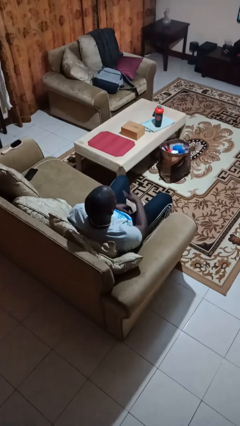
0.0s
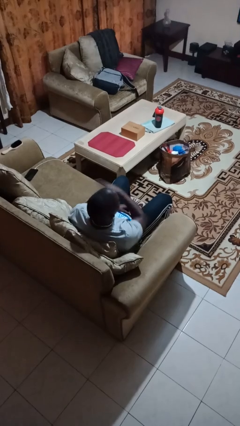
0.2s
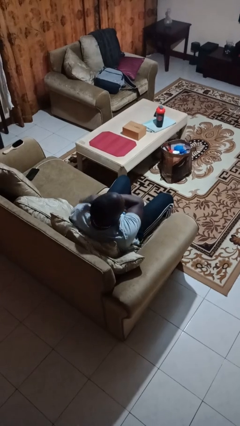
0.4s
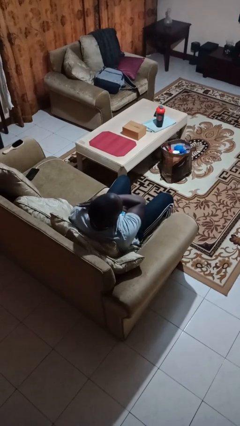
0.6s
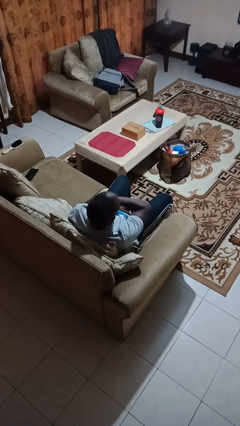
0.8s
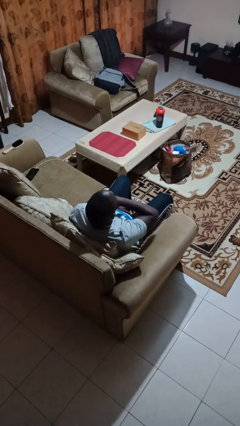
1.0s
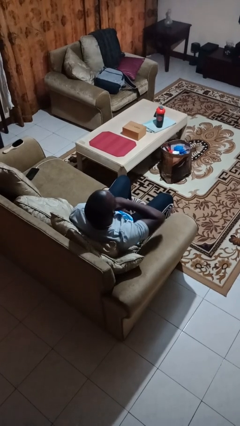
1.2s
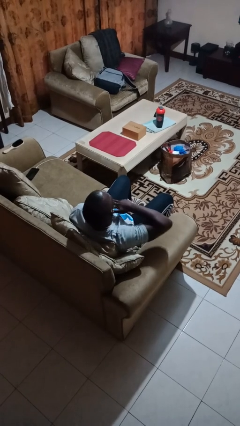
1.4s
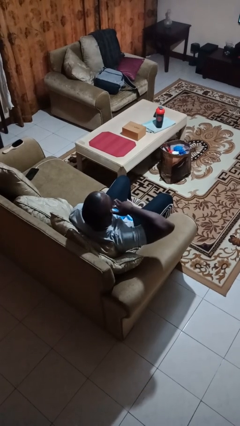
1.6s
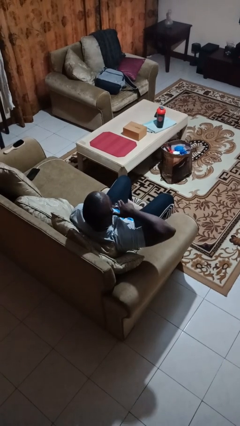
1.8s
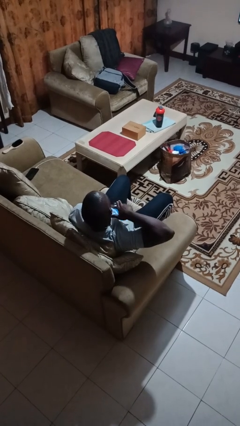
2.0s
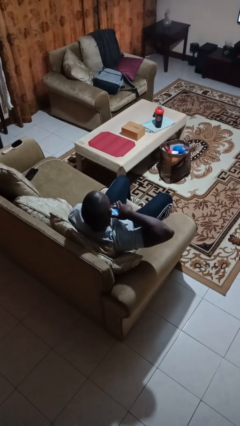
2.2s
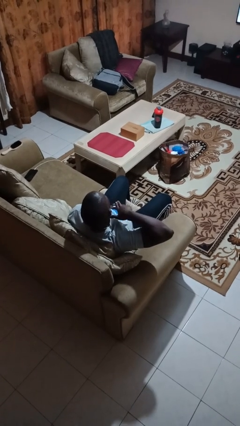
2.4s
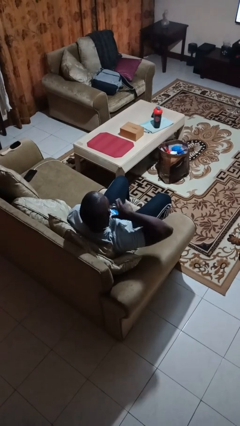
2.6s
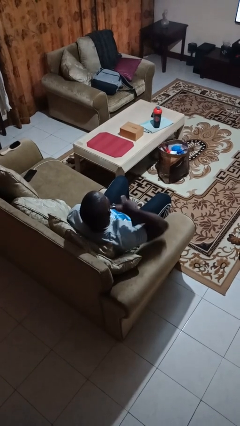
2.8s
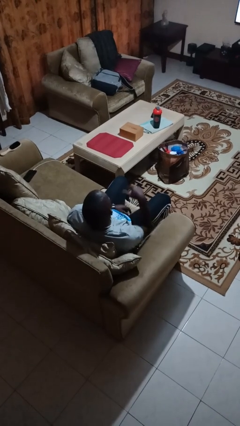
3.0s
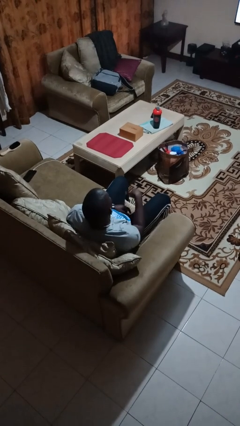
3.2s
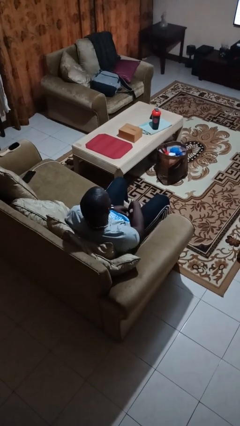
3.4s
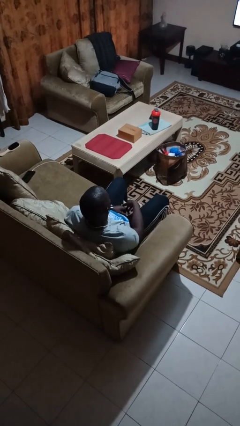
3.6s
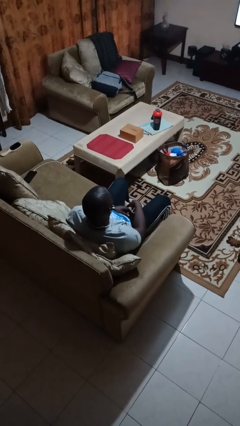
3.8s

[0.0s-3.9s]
person gestures cut

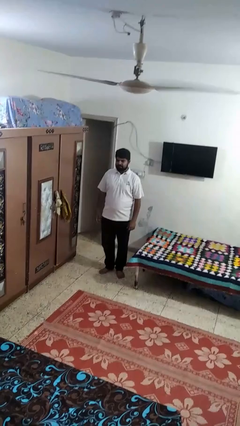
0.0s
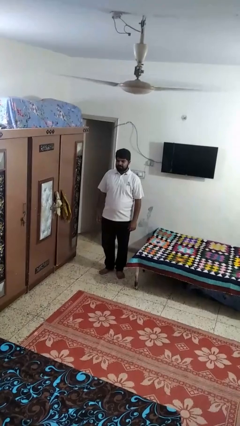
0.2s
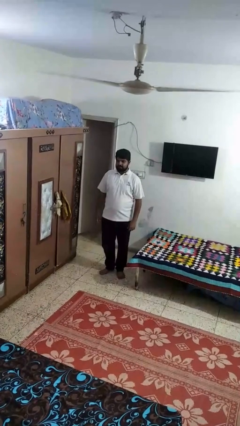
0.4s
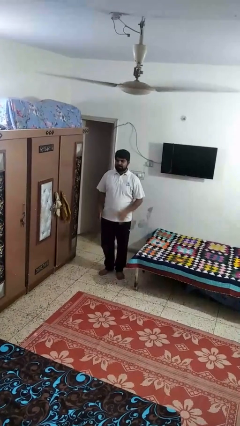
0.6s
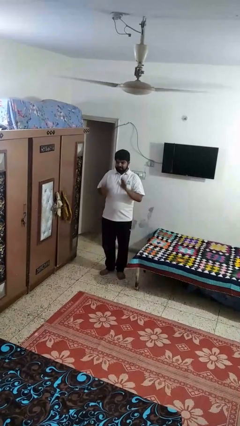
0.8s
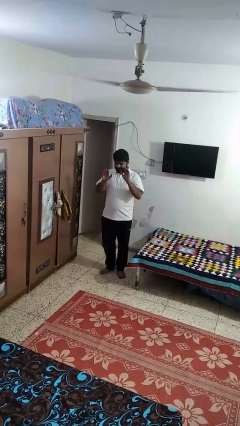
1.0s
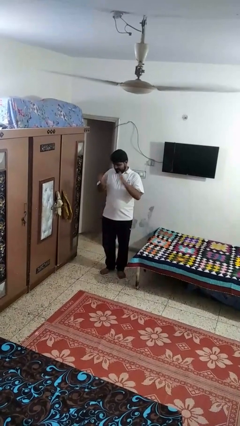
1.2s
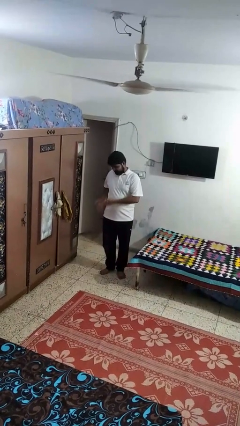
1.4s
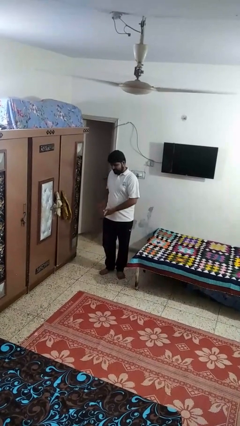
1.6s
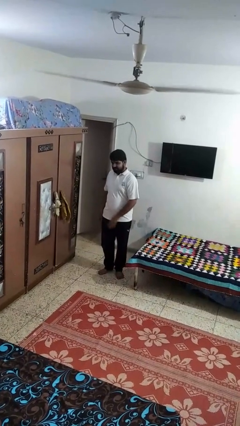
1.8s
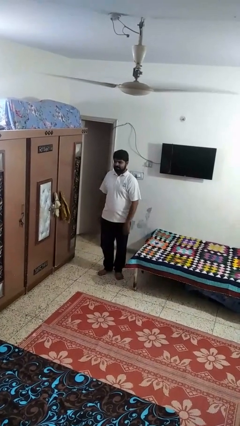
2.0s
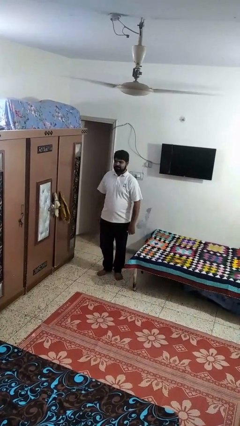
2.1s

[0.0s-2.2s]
person gestures come here

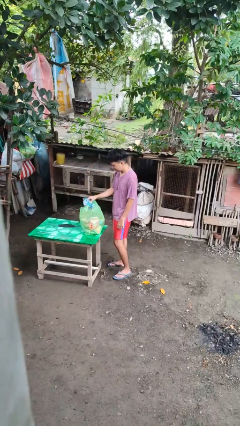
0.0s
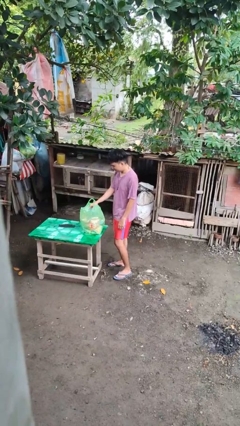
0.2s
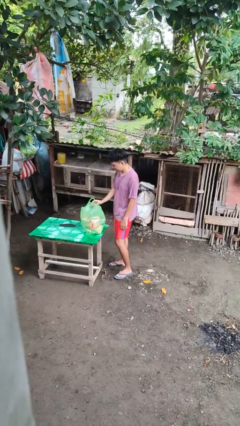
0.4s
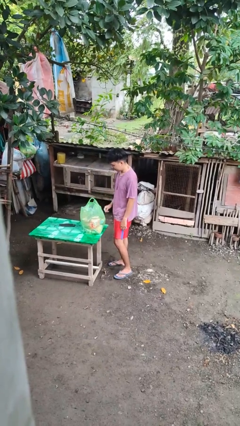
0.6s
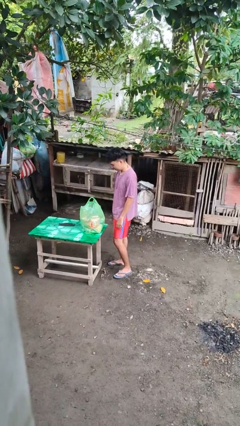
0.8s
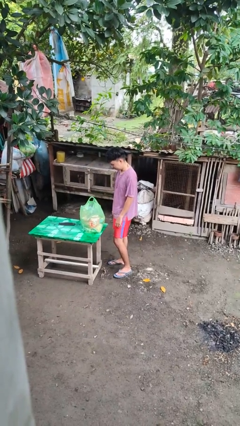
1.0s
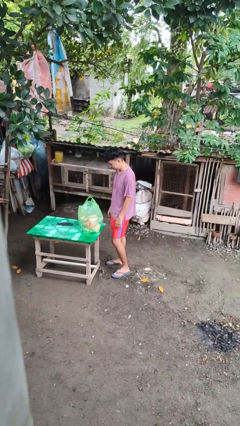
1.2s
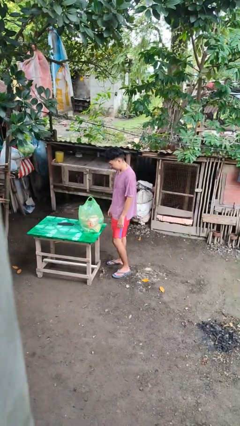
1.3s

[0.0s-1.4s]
person puts object into bag

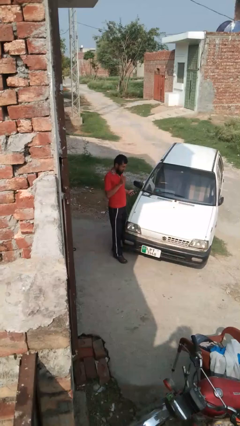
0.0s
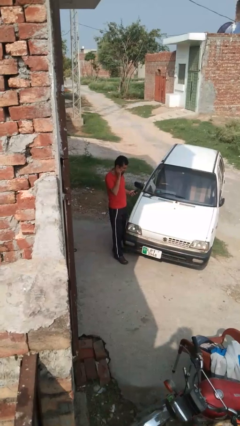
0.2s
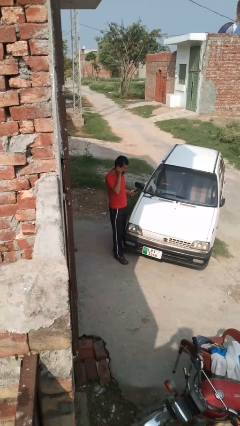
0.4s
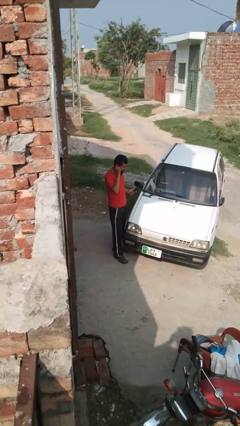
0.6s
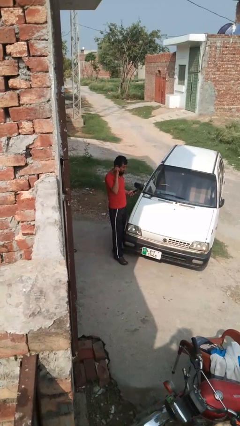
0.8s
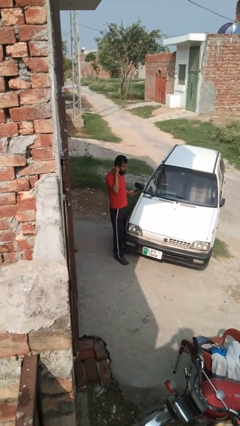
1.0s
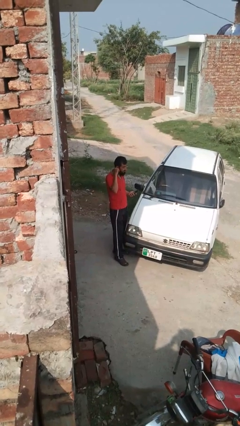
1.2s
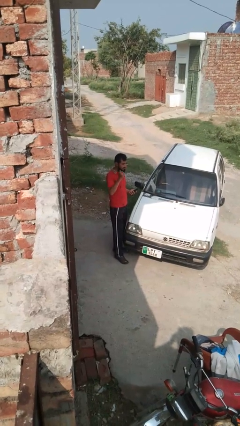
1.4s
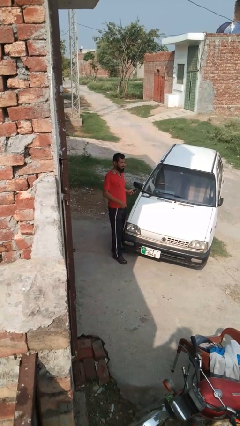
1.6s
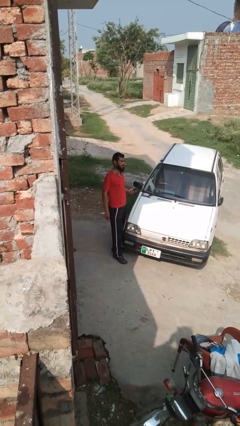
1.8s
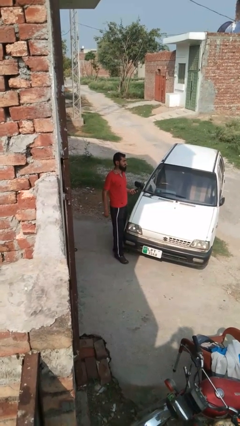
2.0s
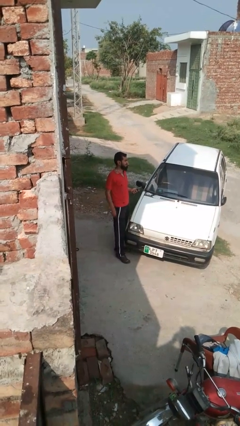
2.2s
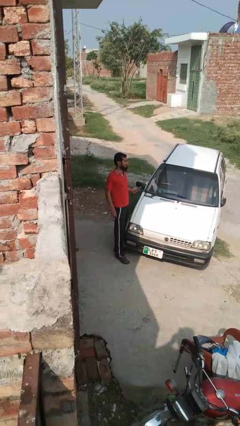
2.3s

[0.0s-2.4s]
person puts on headphones

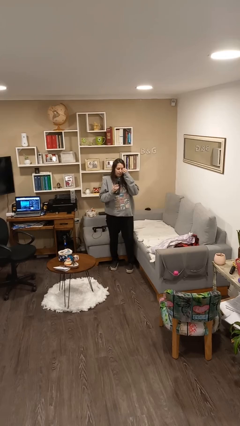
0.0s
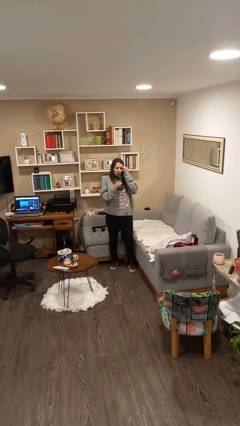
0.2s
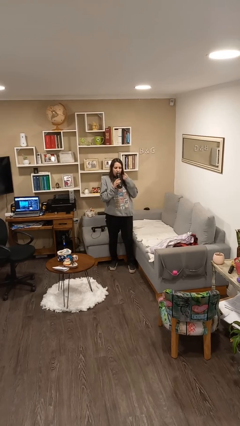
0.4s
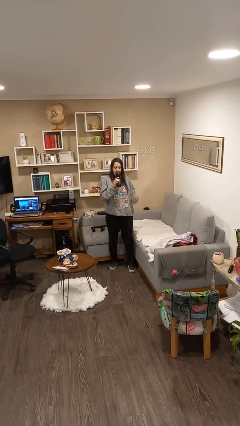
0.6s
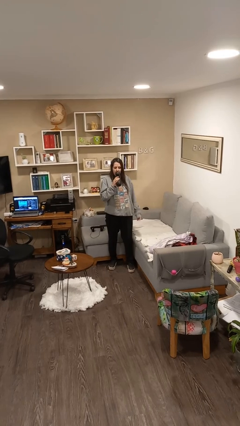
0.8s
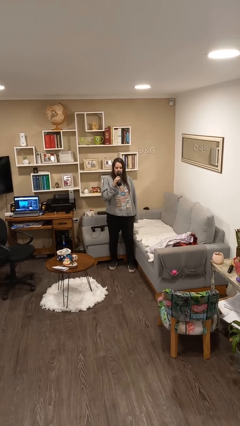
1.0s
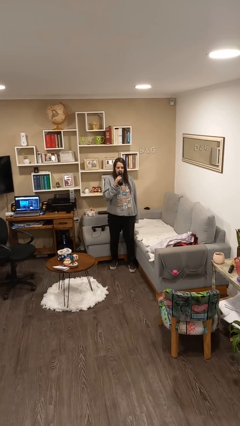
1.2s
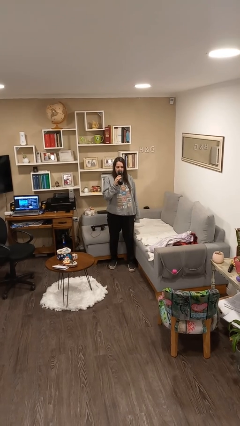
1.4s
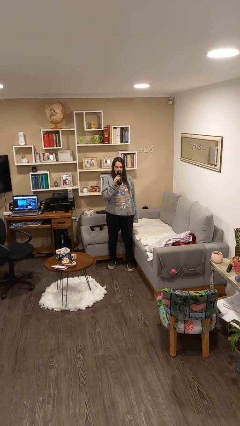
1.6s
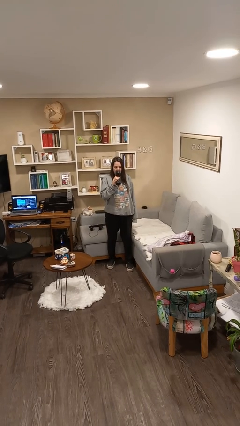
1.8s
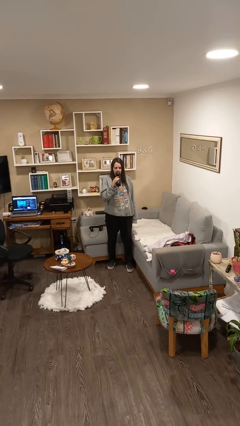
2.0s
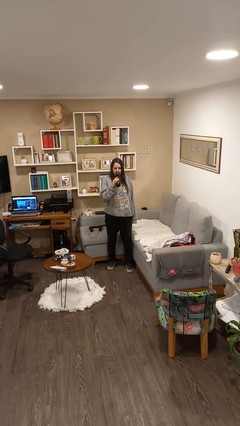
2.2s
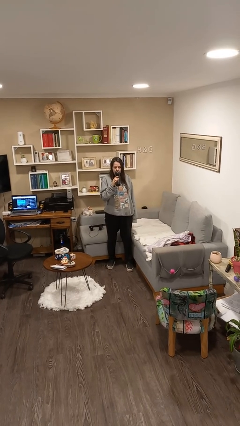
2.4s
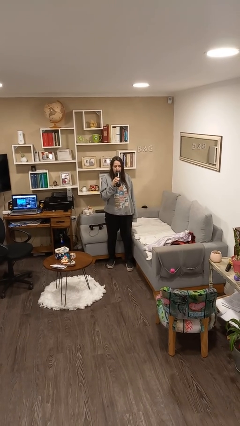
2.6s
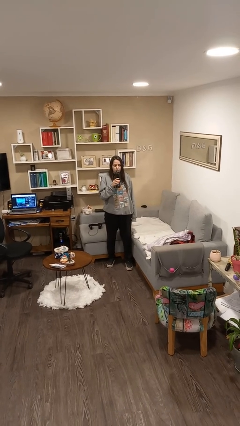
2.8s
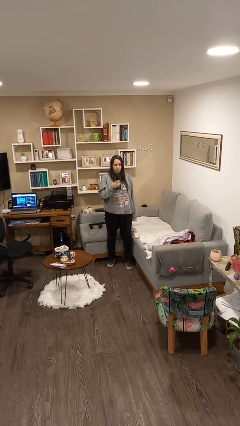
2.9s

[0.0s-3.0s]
person drinks from bottle

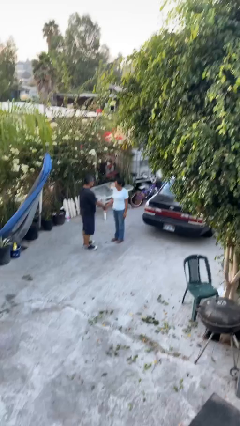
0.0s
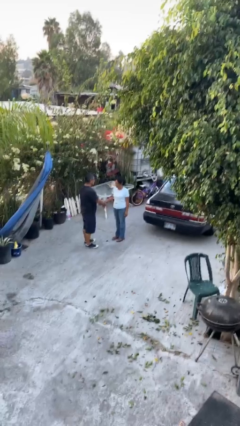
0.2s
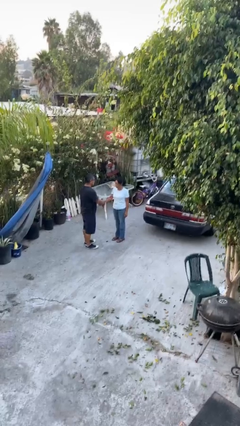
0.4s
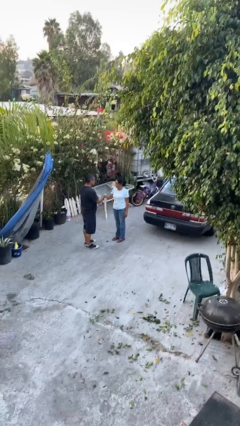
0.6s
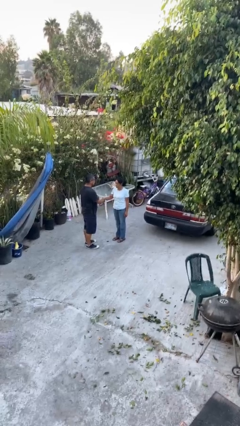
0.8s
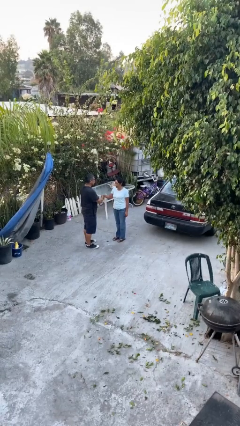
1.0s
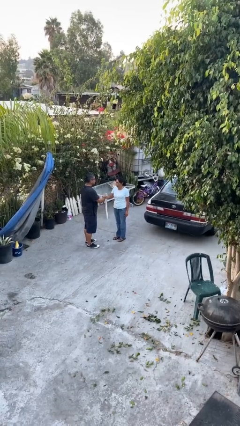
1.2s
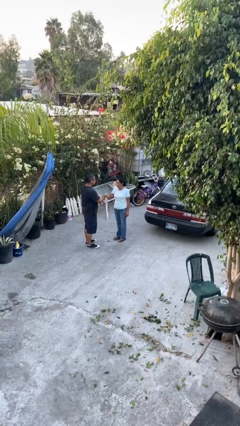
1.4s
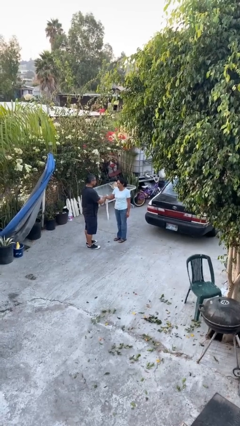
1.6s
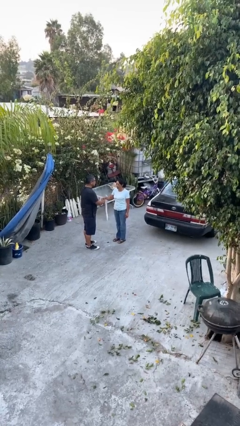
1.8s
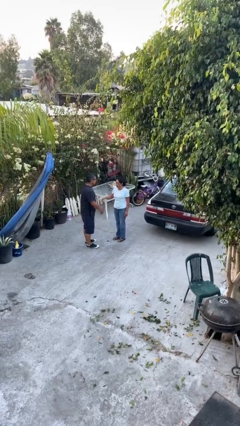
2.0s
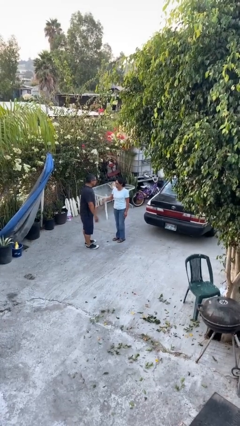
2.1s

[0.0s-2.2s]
person shakes hand

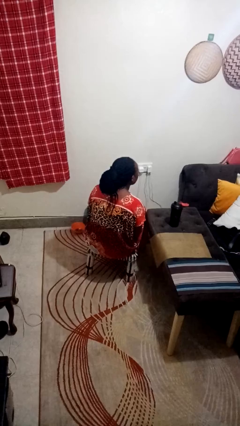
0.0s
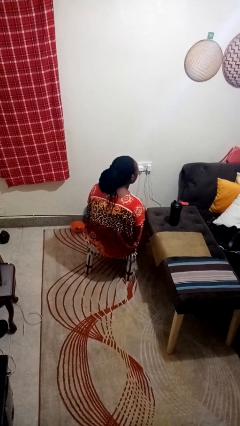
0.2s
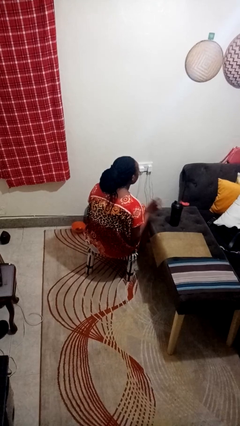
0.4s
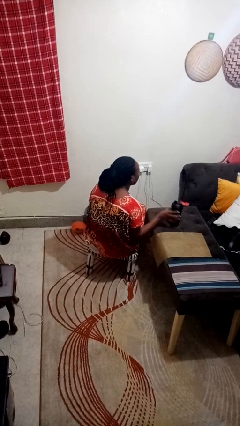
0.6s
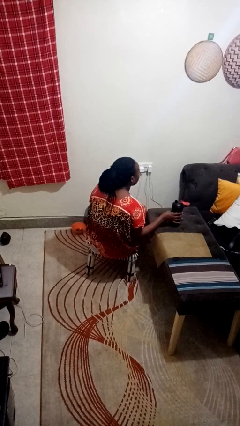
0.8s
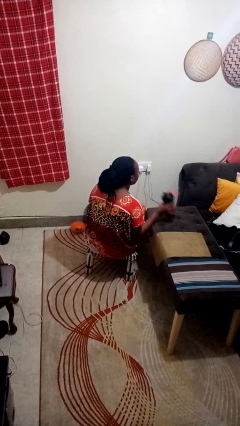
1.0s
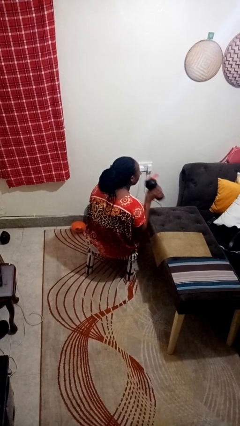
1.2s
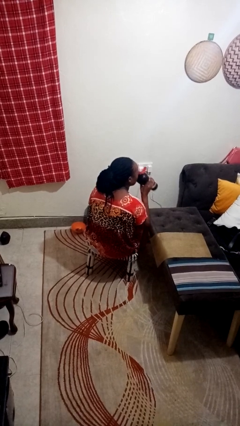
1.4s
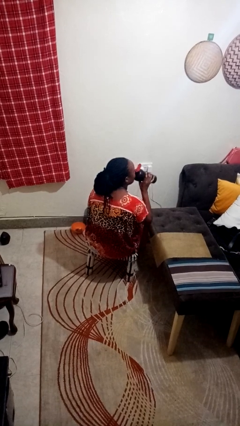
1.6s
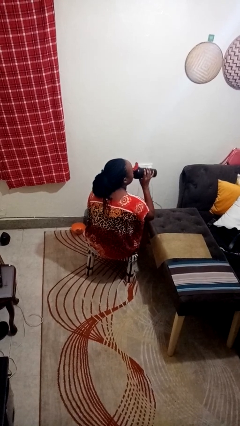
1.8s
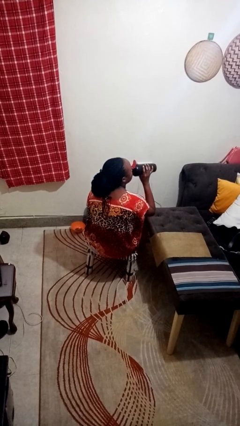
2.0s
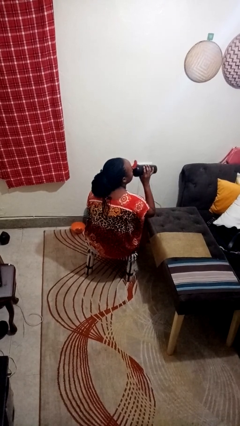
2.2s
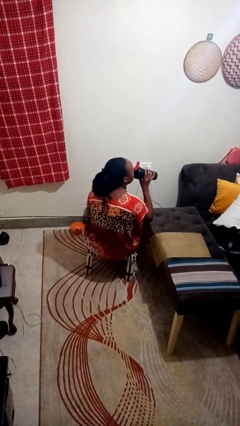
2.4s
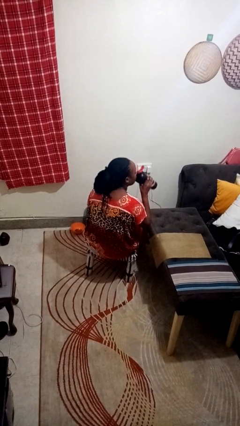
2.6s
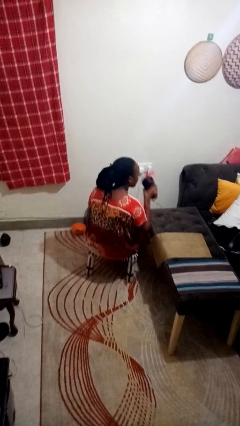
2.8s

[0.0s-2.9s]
person drinks from cup
